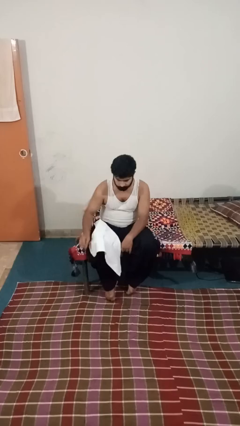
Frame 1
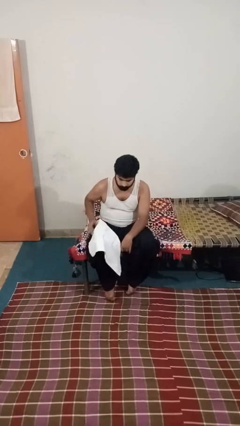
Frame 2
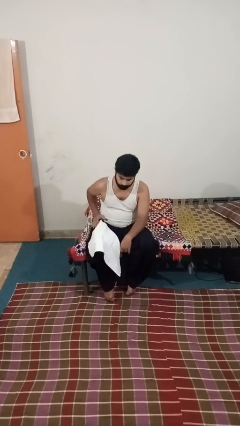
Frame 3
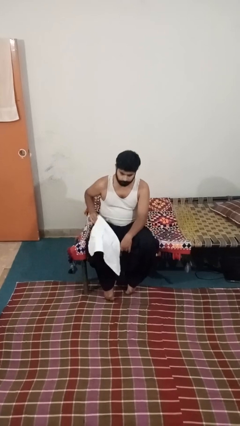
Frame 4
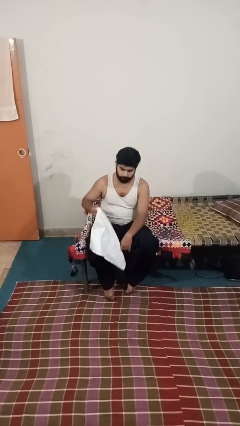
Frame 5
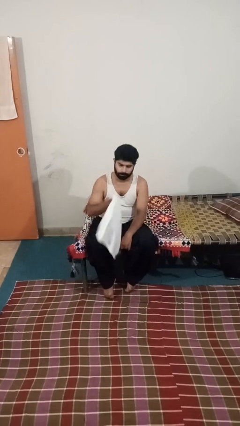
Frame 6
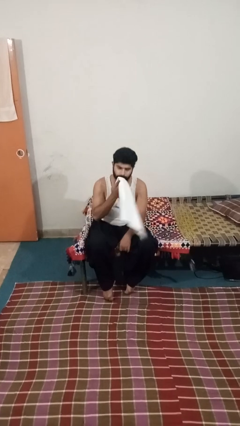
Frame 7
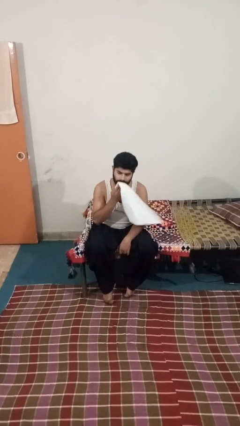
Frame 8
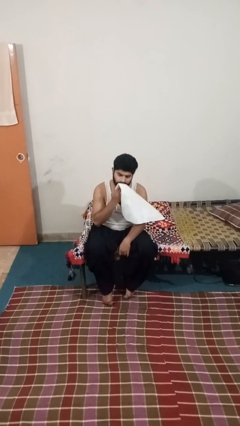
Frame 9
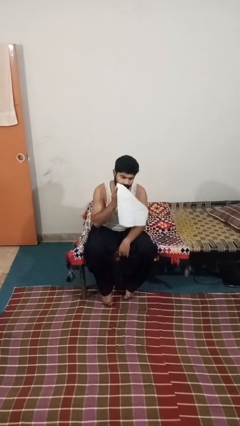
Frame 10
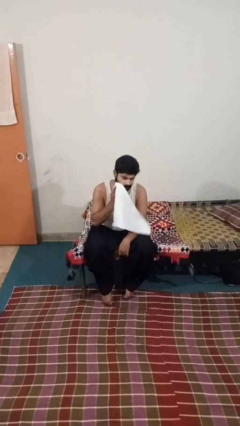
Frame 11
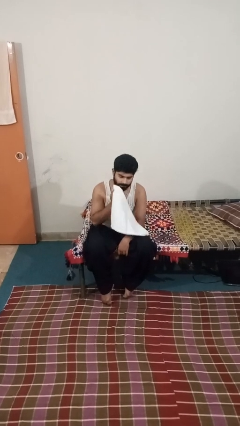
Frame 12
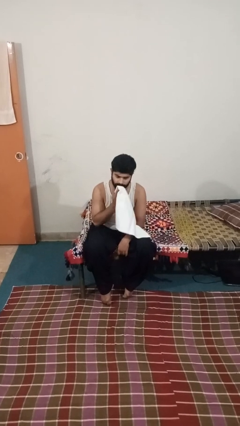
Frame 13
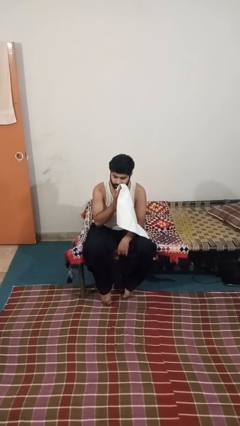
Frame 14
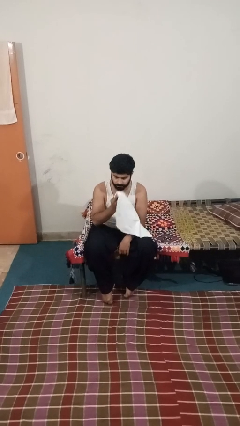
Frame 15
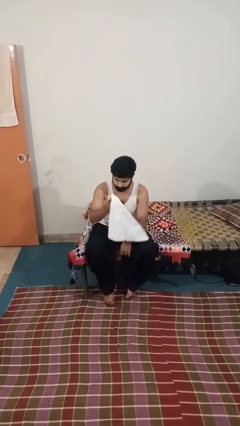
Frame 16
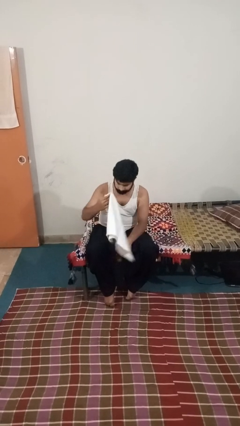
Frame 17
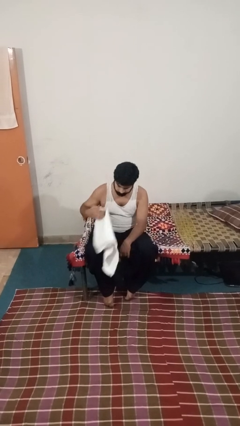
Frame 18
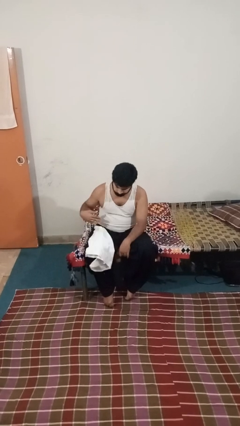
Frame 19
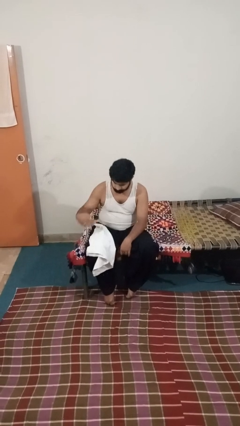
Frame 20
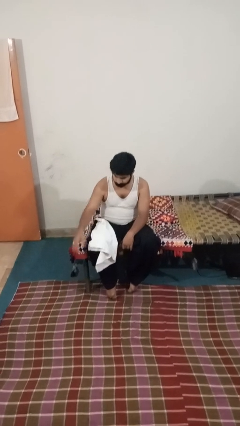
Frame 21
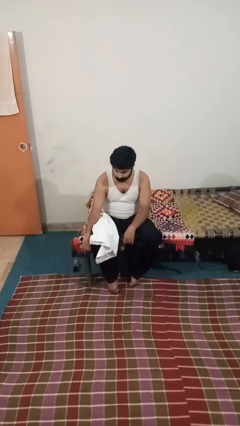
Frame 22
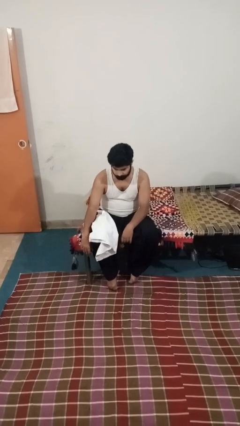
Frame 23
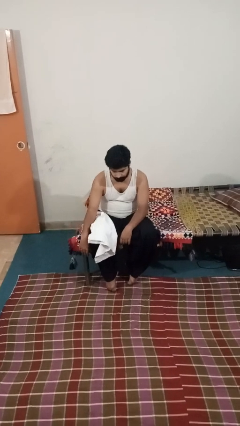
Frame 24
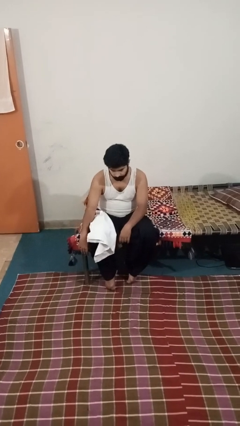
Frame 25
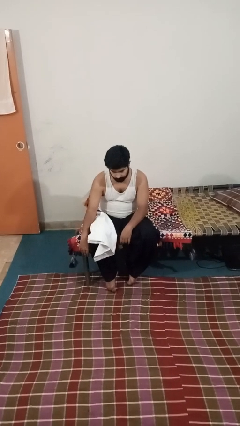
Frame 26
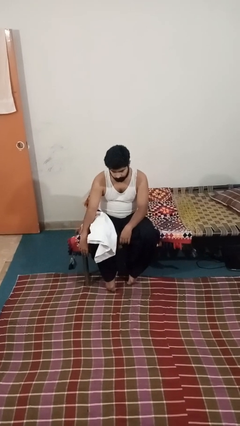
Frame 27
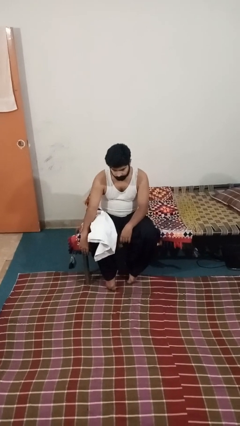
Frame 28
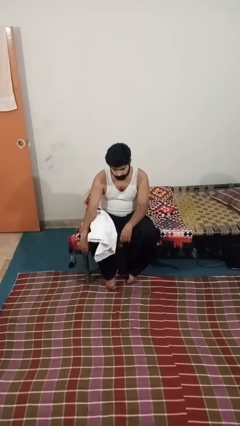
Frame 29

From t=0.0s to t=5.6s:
person wipes mouth with napkin

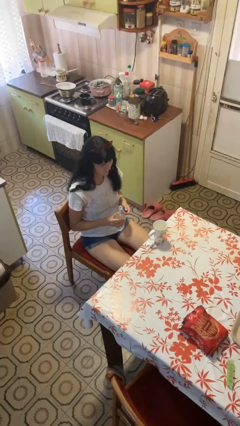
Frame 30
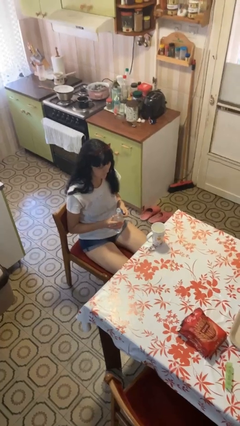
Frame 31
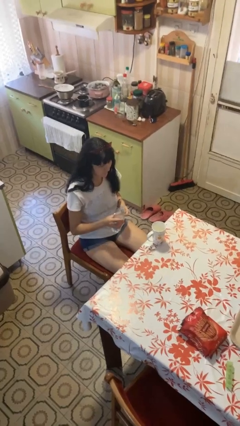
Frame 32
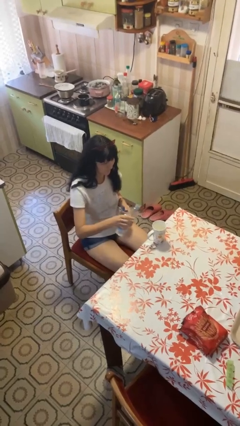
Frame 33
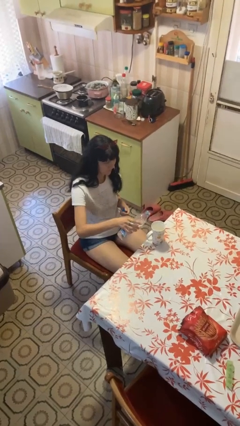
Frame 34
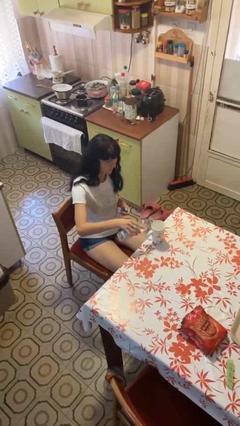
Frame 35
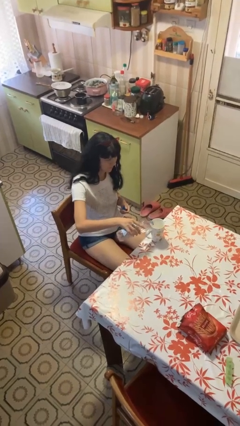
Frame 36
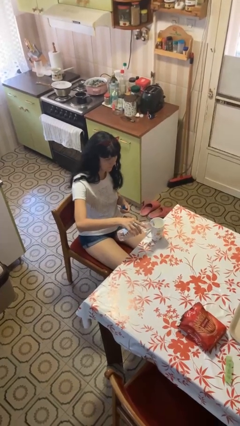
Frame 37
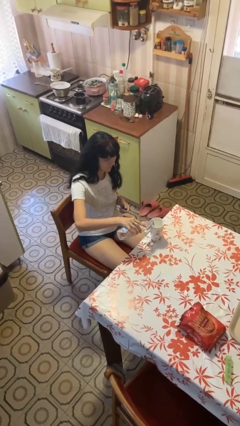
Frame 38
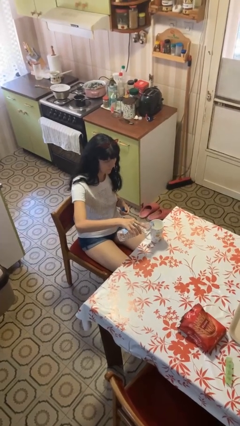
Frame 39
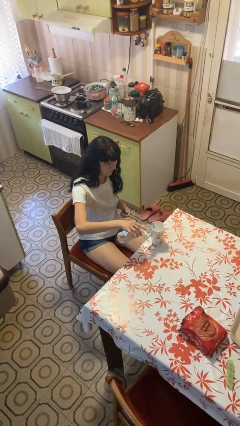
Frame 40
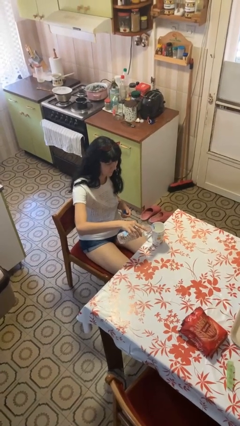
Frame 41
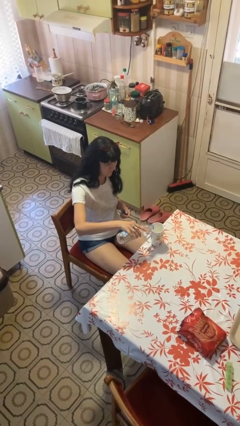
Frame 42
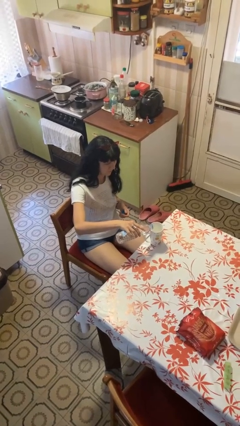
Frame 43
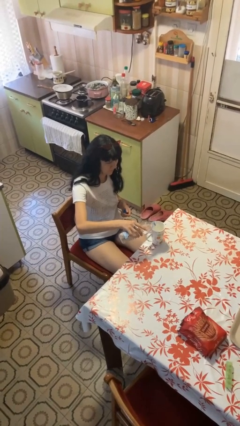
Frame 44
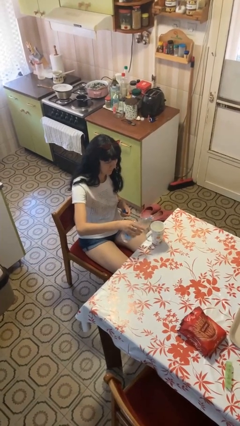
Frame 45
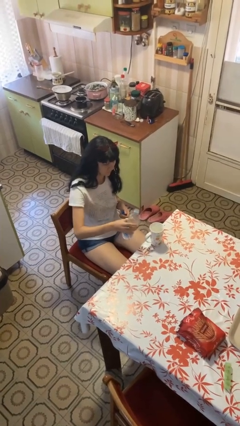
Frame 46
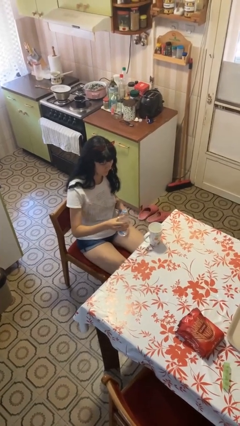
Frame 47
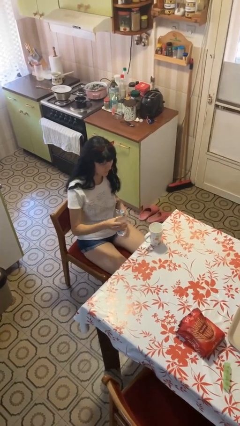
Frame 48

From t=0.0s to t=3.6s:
person pours liquid into cup

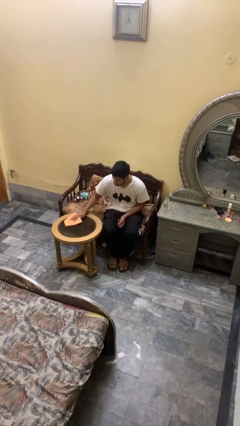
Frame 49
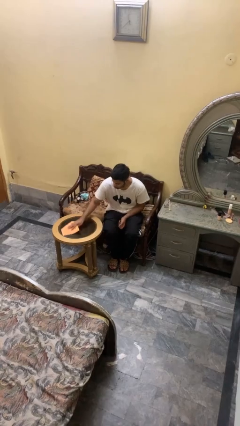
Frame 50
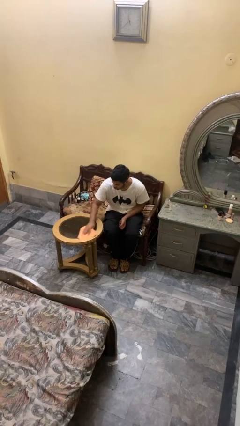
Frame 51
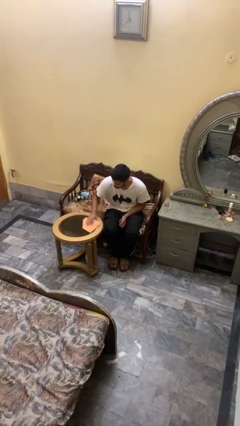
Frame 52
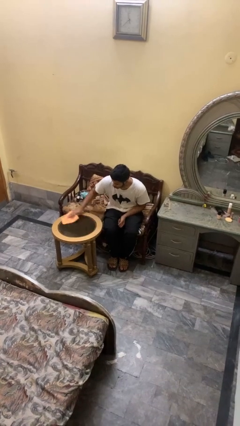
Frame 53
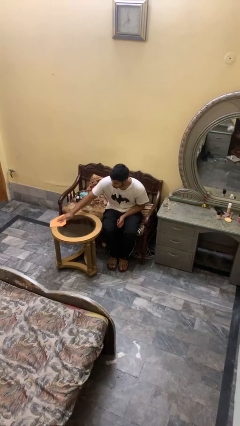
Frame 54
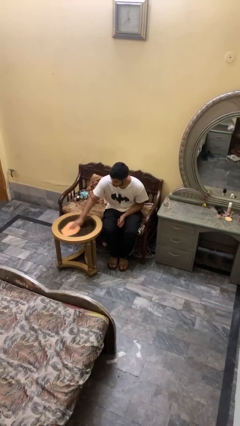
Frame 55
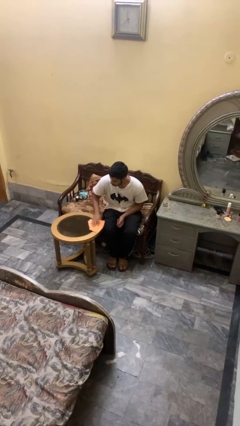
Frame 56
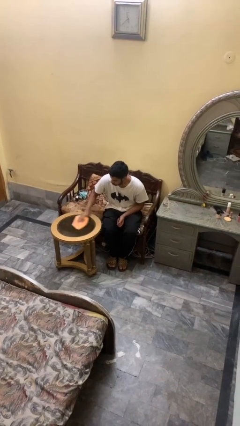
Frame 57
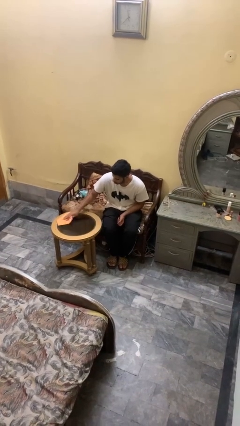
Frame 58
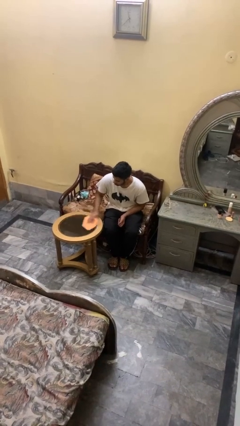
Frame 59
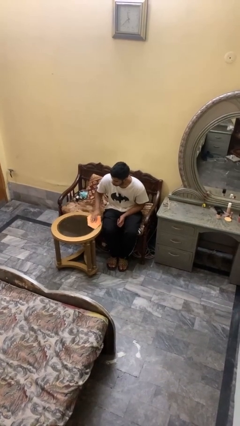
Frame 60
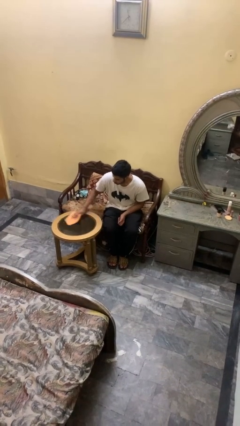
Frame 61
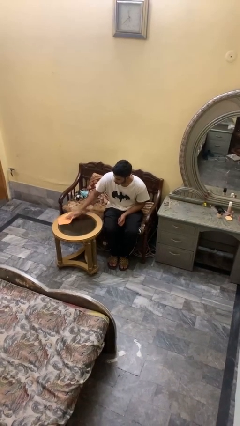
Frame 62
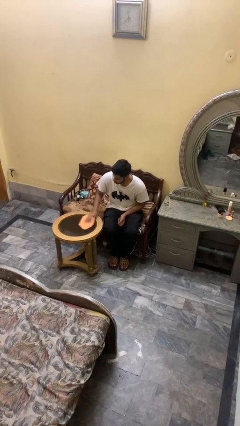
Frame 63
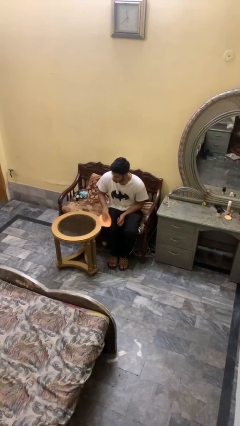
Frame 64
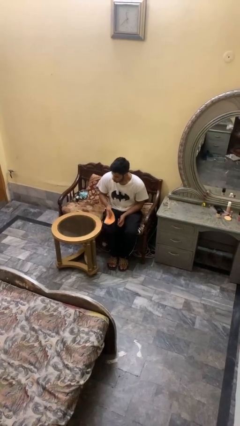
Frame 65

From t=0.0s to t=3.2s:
person cleans table with rag

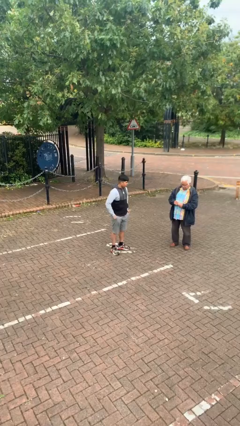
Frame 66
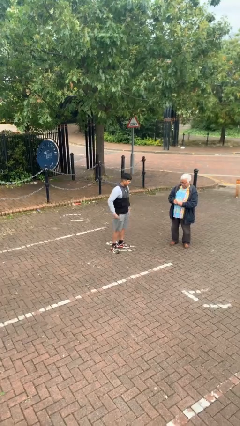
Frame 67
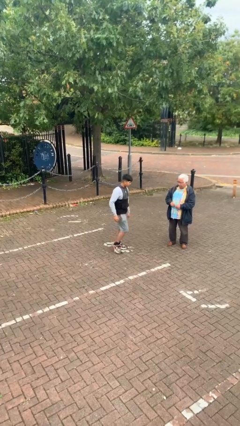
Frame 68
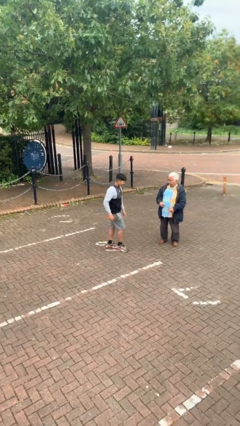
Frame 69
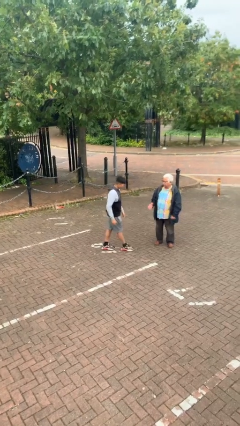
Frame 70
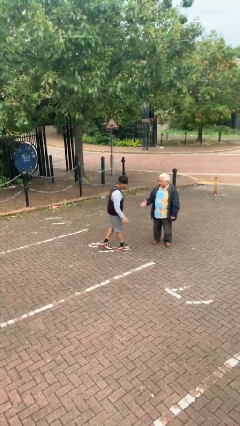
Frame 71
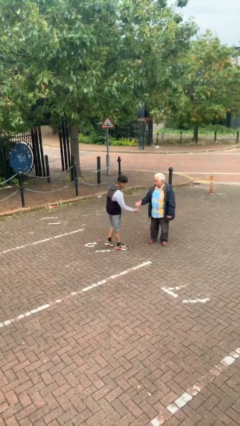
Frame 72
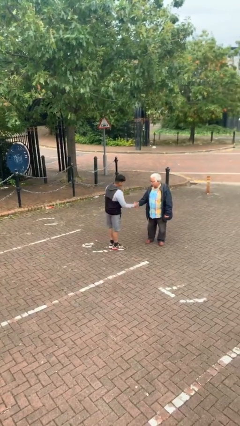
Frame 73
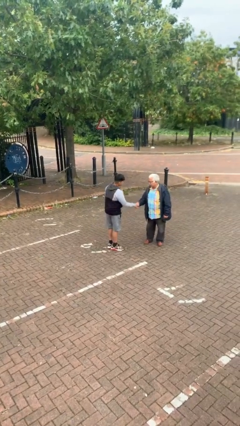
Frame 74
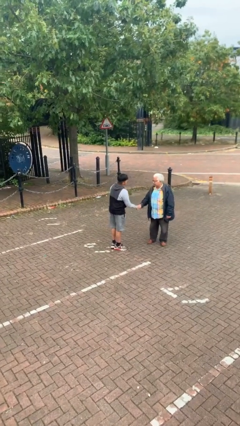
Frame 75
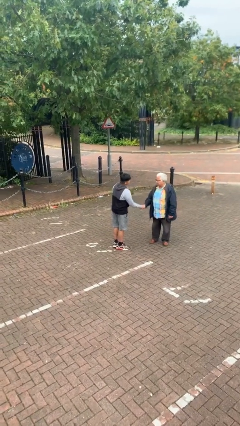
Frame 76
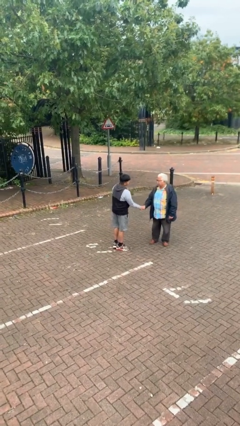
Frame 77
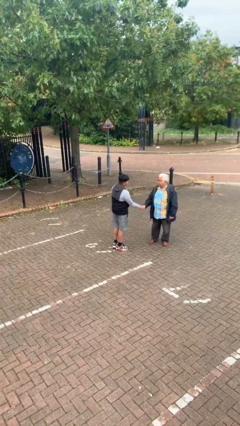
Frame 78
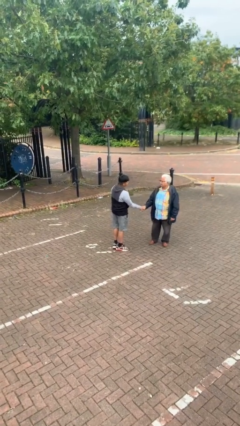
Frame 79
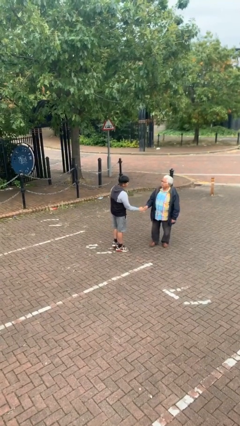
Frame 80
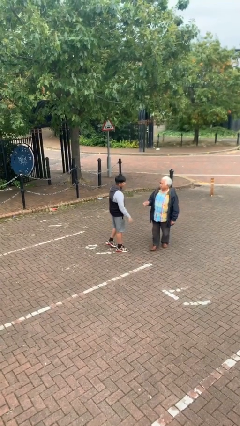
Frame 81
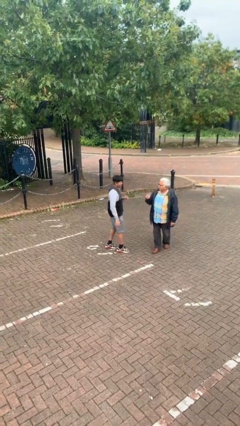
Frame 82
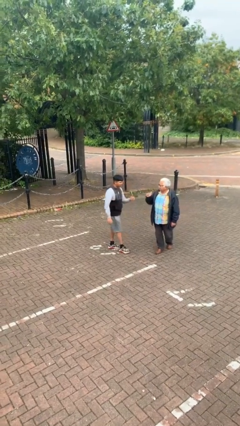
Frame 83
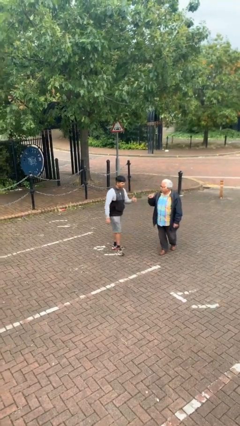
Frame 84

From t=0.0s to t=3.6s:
person shakes hand

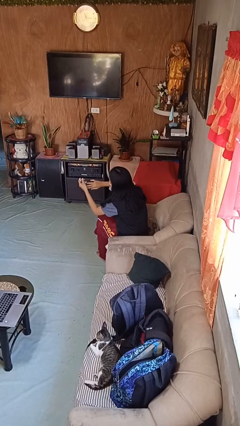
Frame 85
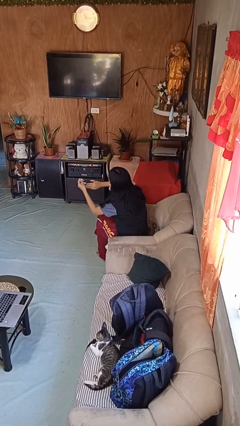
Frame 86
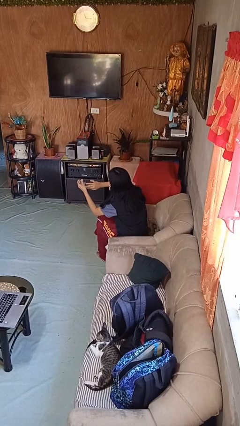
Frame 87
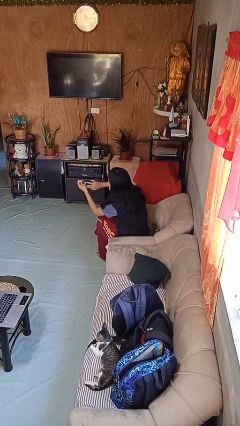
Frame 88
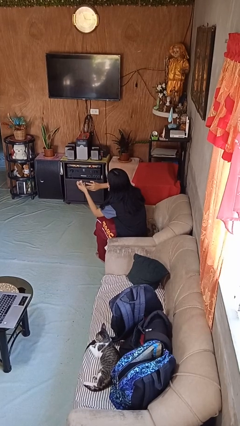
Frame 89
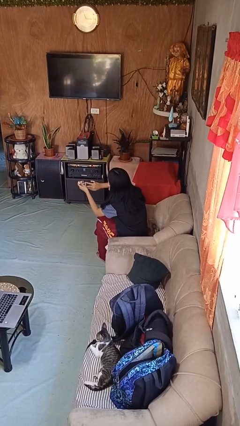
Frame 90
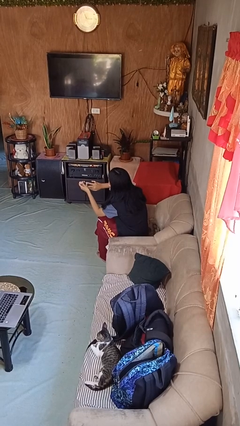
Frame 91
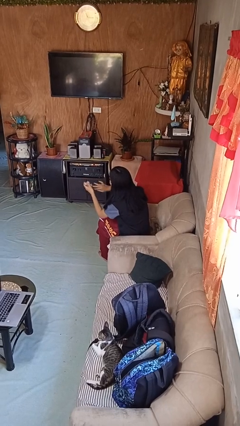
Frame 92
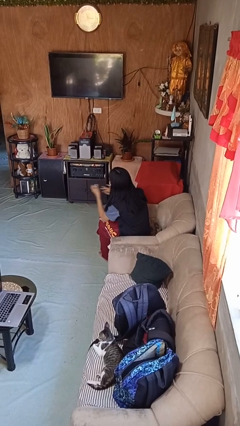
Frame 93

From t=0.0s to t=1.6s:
person clips fingernails

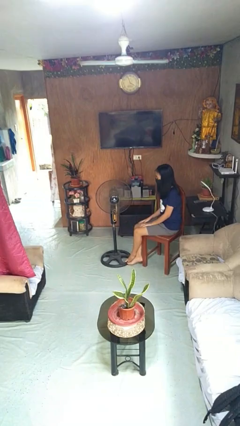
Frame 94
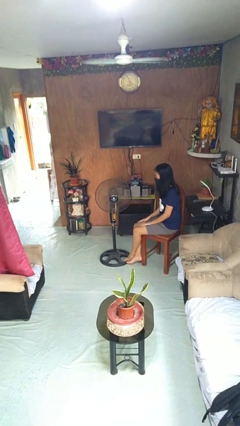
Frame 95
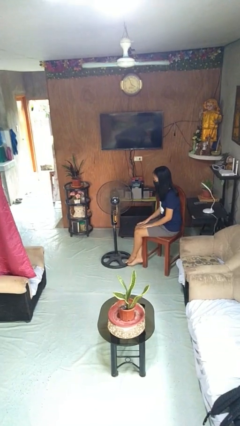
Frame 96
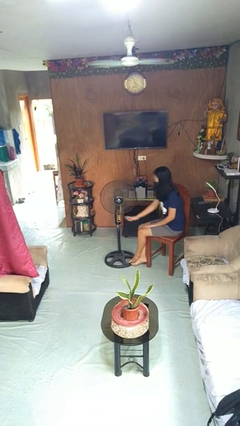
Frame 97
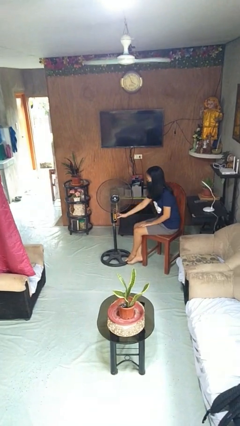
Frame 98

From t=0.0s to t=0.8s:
person turns on fan
